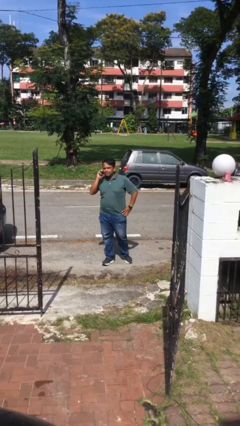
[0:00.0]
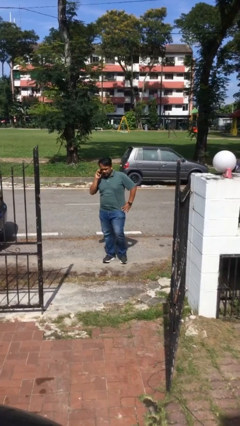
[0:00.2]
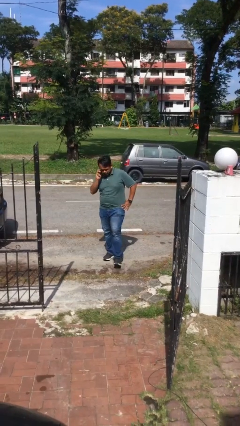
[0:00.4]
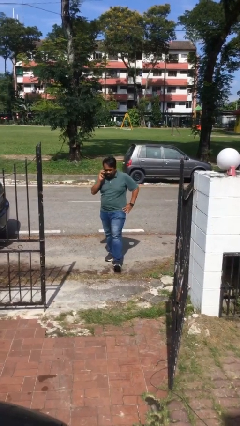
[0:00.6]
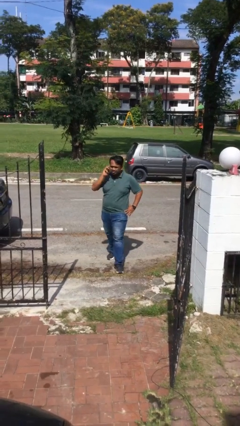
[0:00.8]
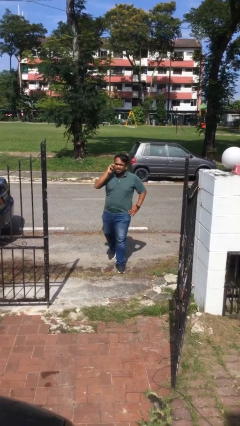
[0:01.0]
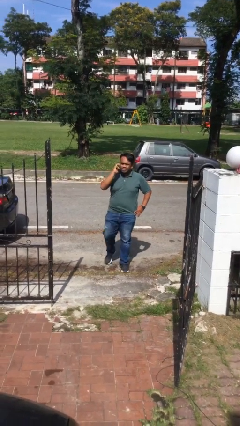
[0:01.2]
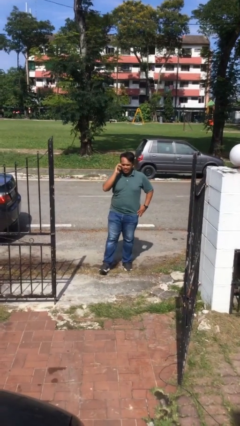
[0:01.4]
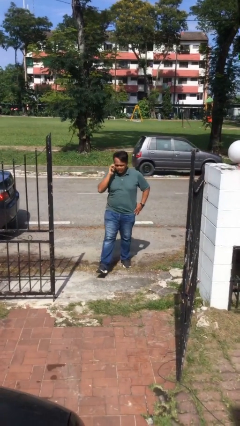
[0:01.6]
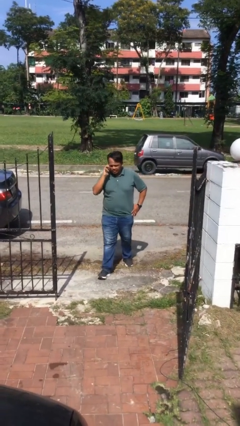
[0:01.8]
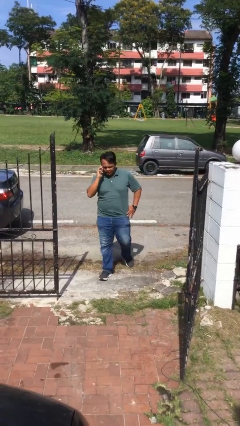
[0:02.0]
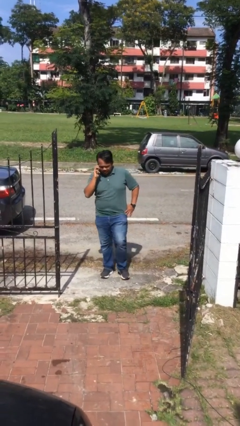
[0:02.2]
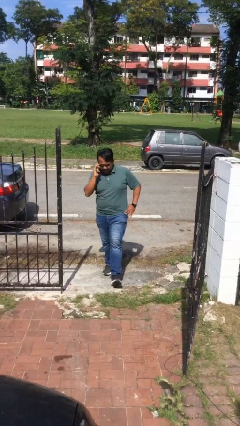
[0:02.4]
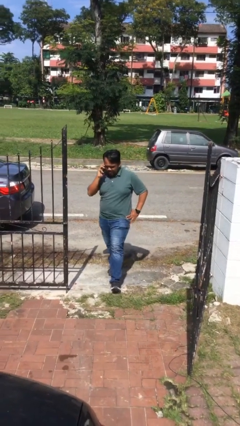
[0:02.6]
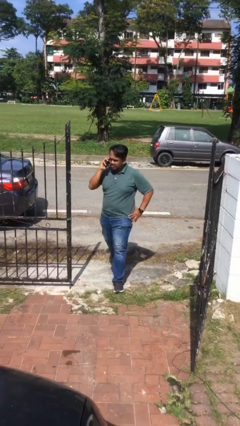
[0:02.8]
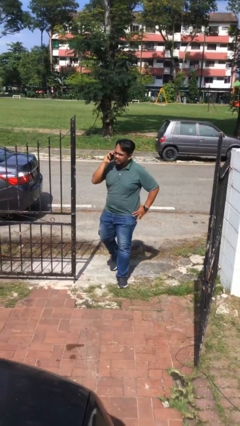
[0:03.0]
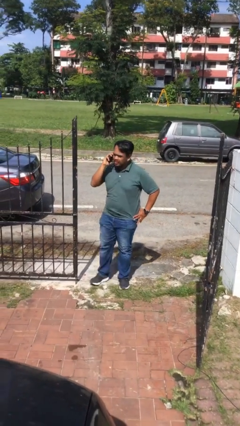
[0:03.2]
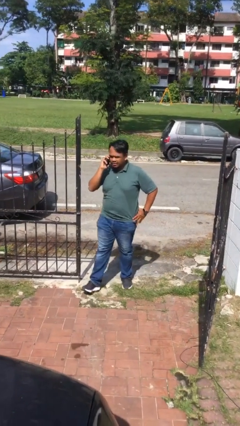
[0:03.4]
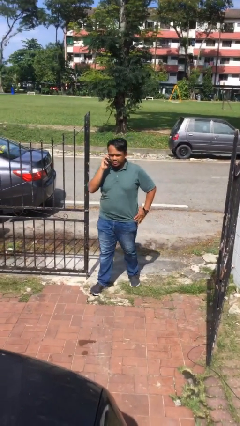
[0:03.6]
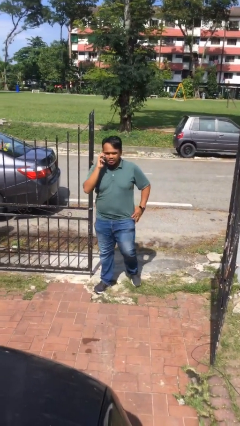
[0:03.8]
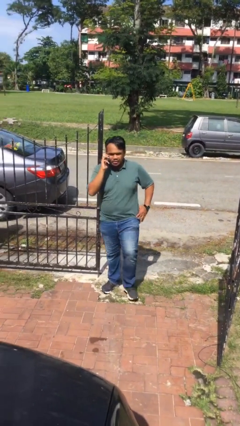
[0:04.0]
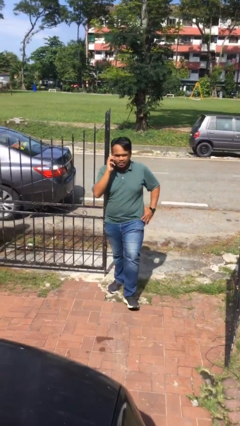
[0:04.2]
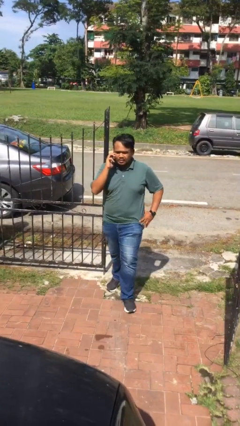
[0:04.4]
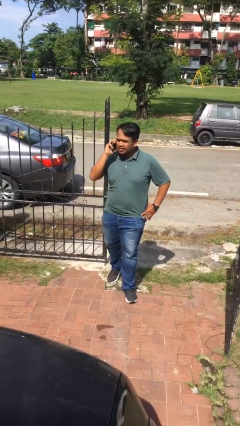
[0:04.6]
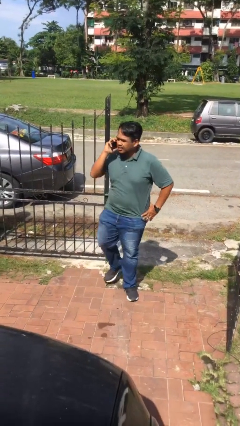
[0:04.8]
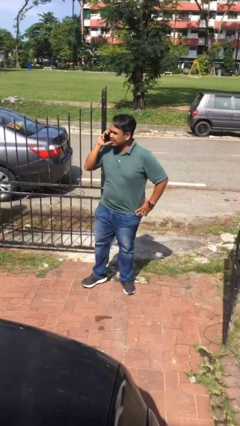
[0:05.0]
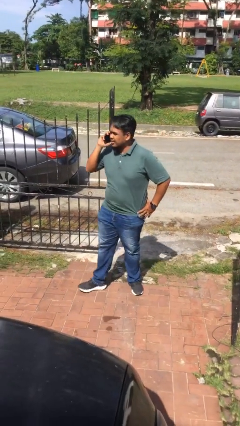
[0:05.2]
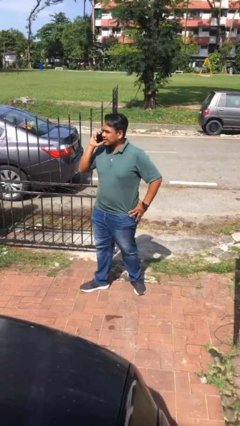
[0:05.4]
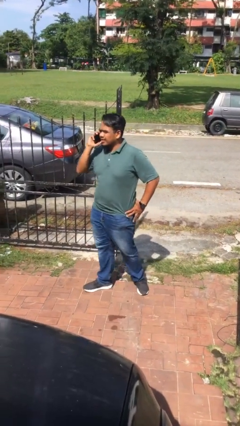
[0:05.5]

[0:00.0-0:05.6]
person enters scene through structure

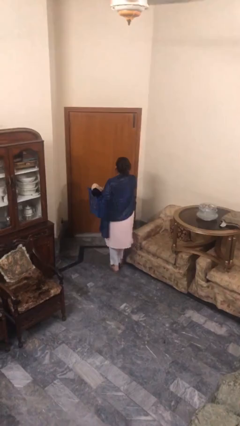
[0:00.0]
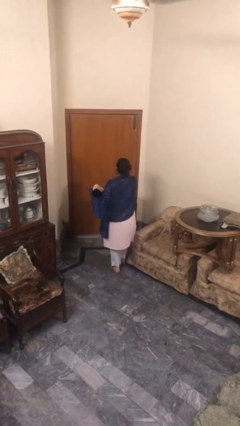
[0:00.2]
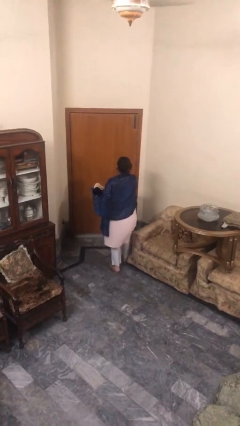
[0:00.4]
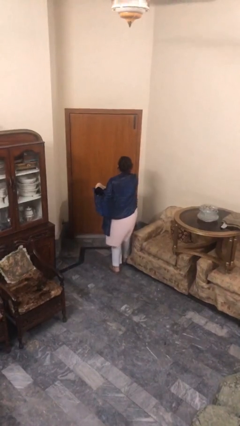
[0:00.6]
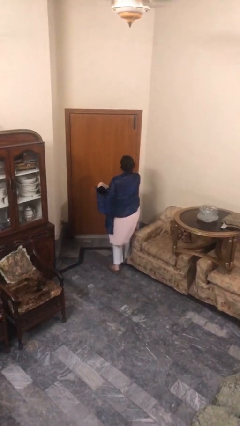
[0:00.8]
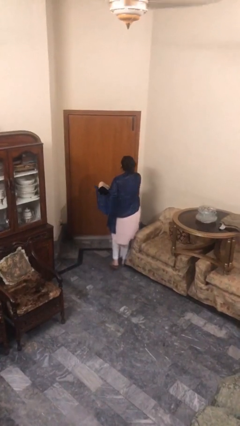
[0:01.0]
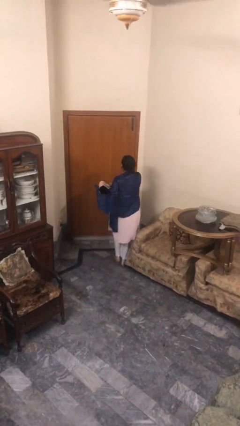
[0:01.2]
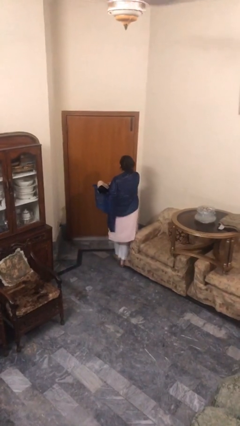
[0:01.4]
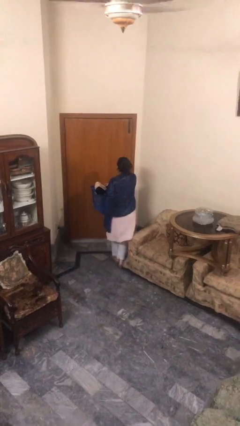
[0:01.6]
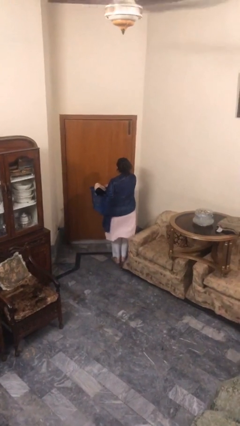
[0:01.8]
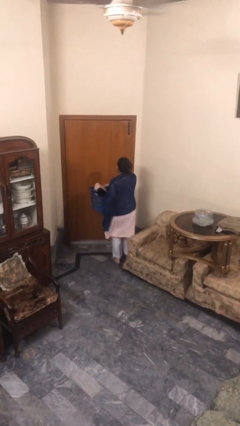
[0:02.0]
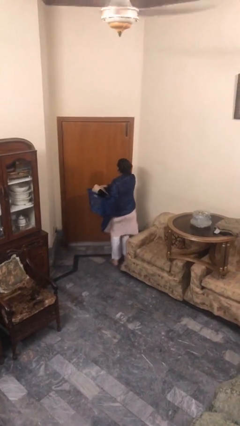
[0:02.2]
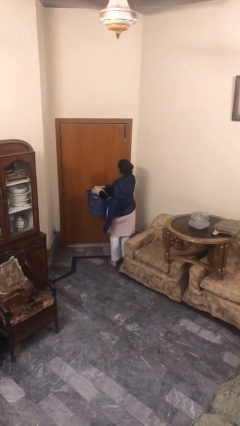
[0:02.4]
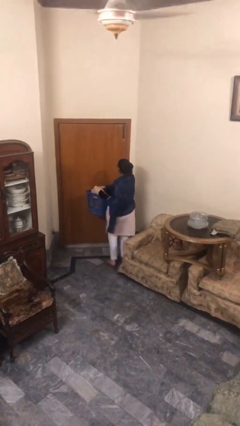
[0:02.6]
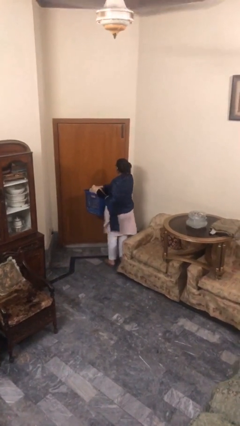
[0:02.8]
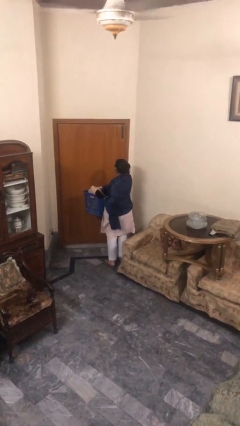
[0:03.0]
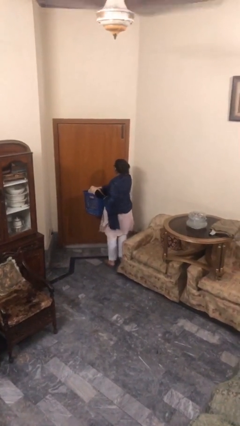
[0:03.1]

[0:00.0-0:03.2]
person carries laundry basket

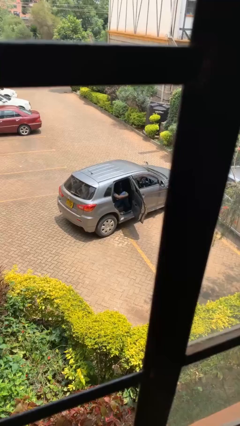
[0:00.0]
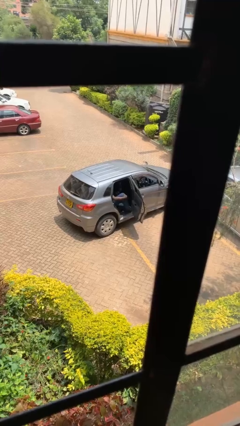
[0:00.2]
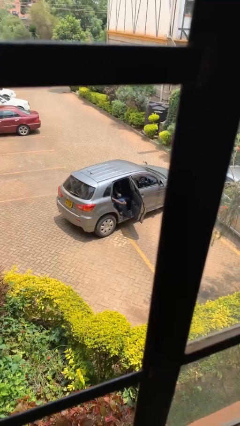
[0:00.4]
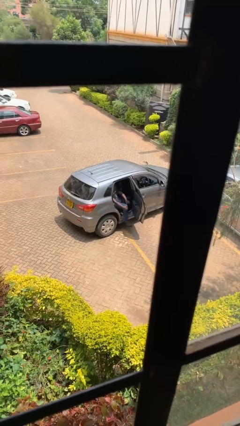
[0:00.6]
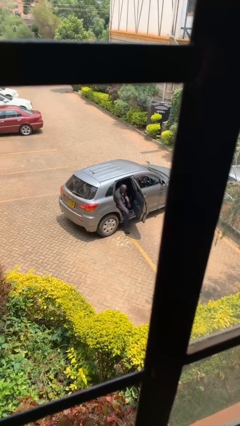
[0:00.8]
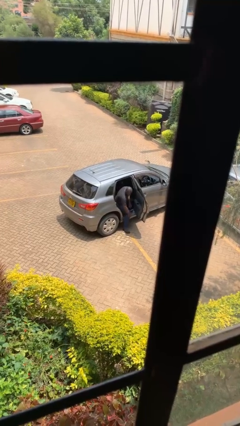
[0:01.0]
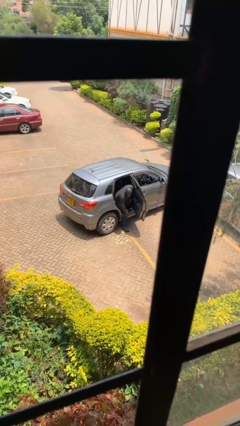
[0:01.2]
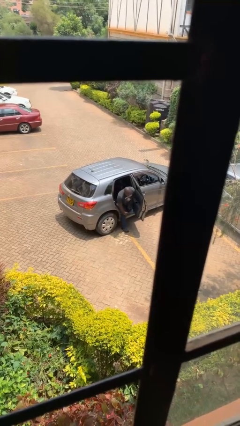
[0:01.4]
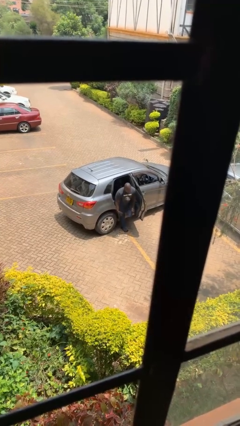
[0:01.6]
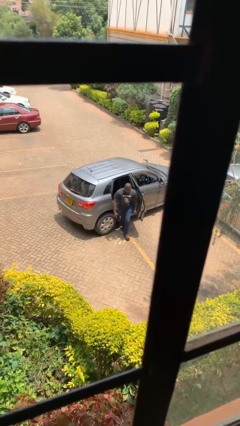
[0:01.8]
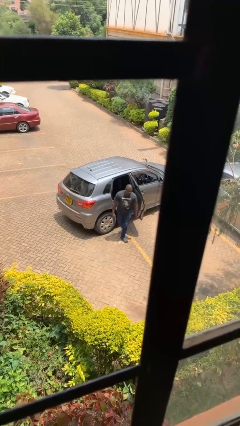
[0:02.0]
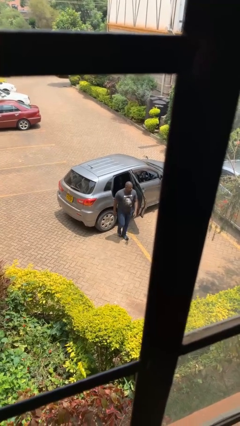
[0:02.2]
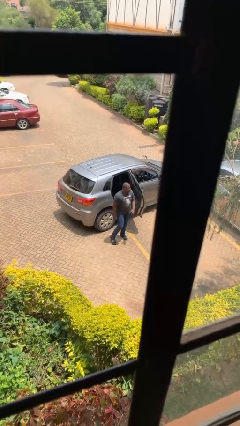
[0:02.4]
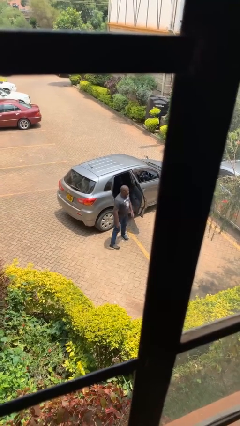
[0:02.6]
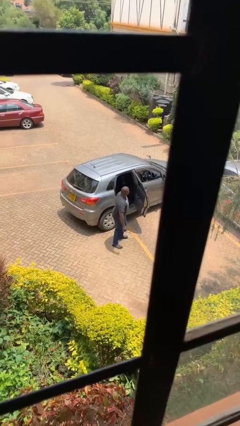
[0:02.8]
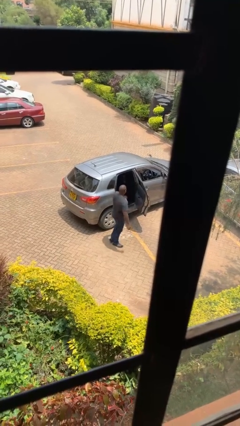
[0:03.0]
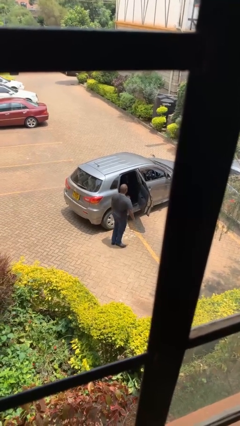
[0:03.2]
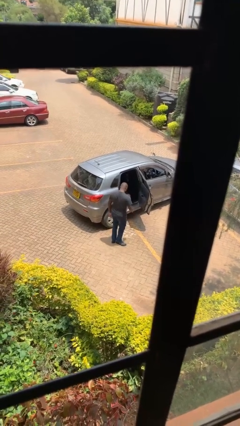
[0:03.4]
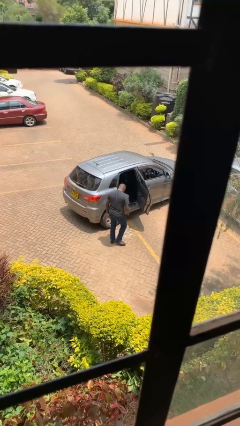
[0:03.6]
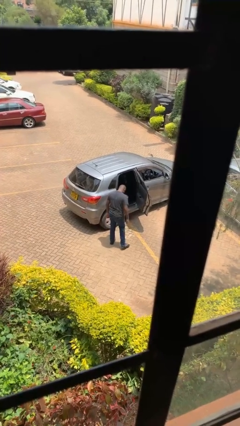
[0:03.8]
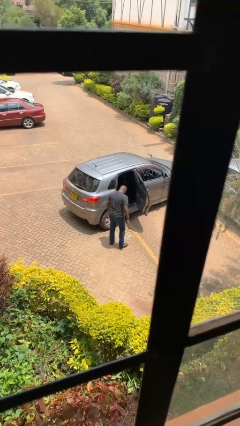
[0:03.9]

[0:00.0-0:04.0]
person exits car

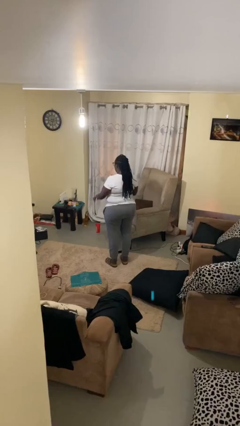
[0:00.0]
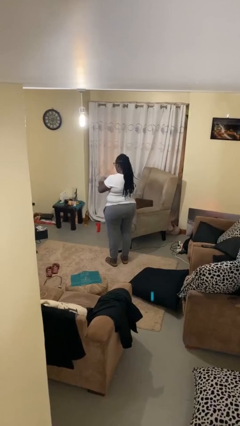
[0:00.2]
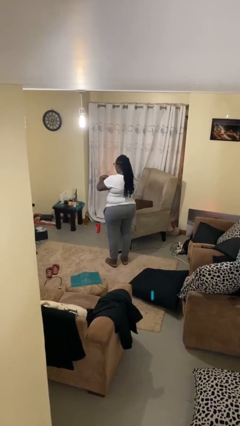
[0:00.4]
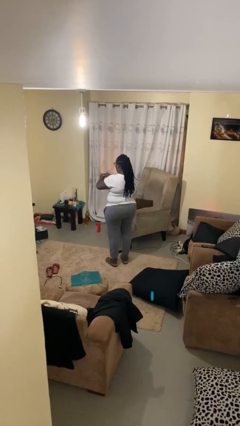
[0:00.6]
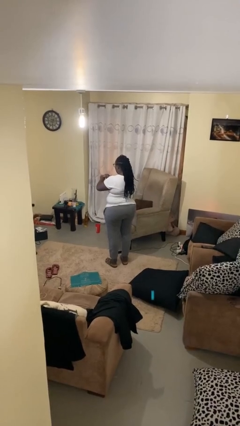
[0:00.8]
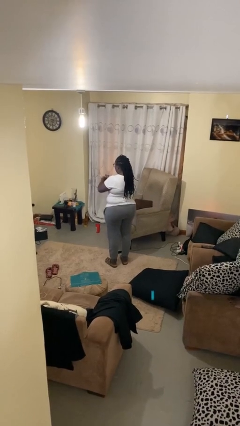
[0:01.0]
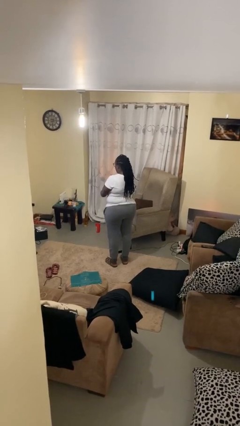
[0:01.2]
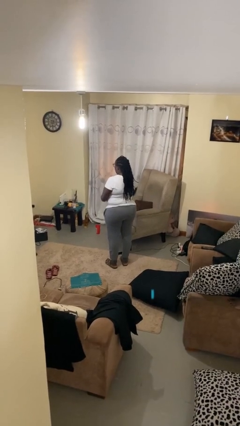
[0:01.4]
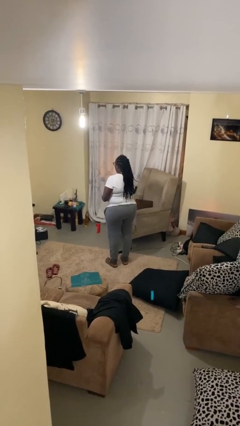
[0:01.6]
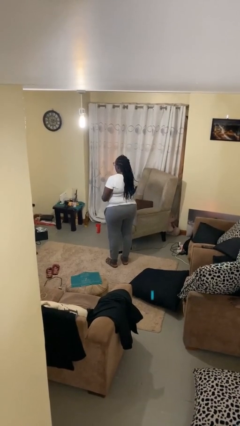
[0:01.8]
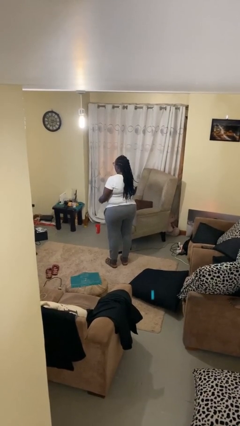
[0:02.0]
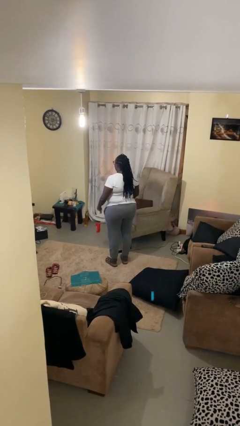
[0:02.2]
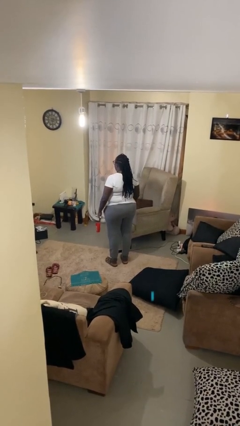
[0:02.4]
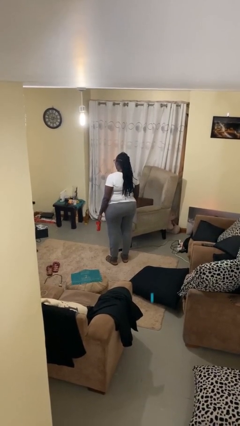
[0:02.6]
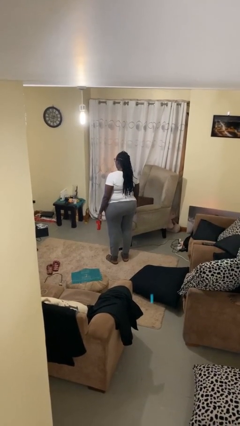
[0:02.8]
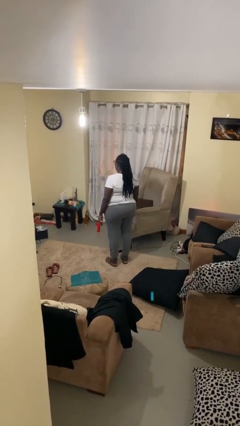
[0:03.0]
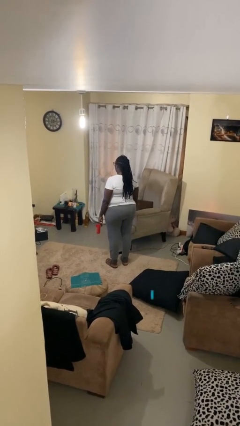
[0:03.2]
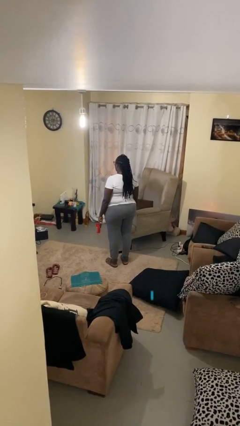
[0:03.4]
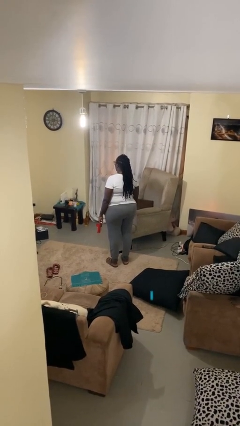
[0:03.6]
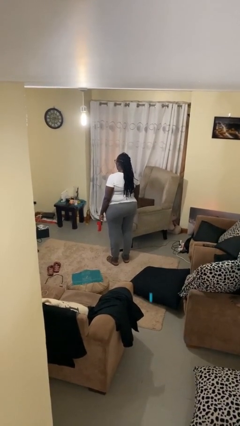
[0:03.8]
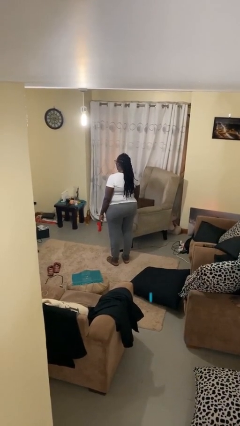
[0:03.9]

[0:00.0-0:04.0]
person takes off wristwatch

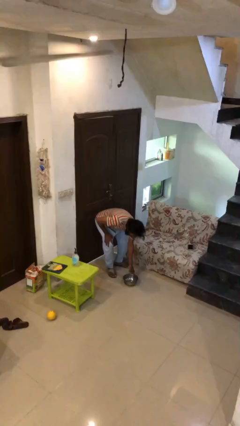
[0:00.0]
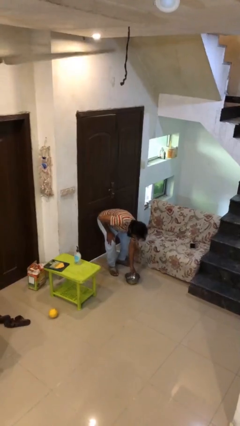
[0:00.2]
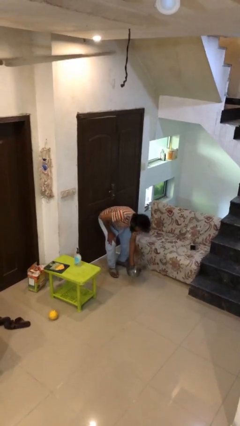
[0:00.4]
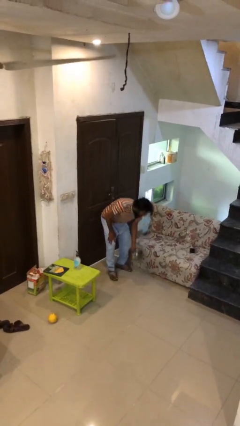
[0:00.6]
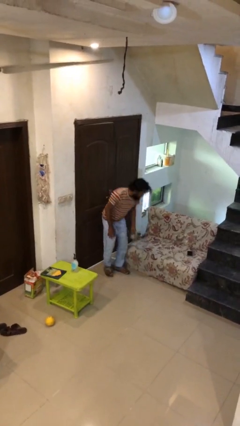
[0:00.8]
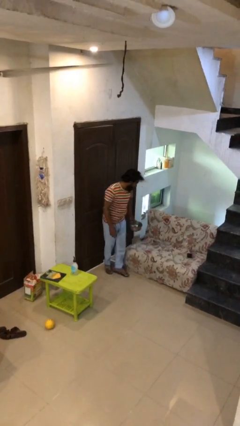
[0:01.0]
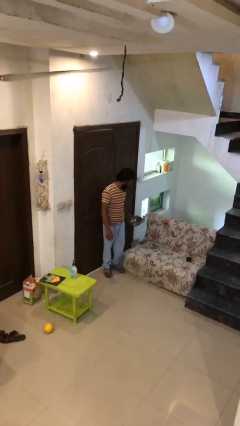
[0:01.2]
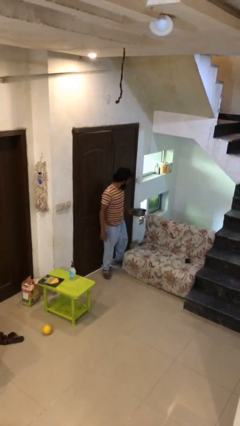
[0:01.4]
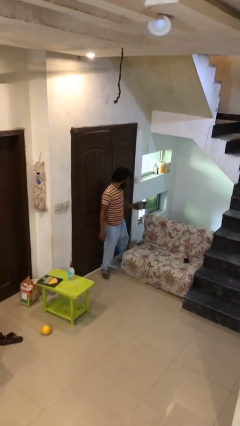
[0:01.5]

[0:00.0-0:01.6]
person picks up object from floor
